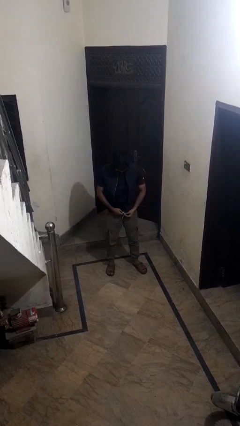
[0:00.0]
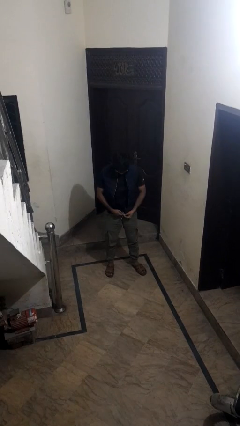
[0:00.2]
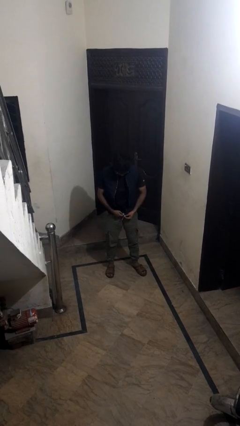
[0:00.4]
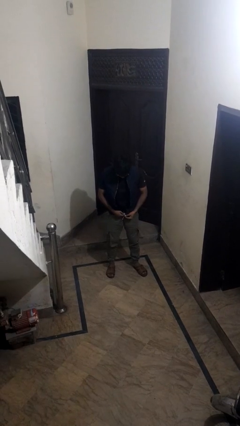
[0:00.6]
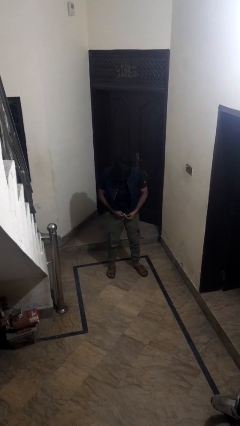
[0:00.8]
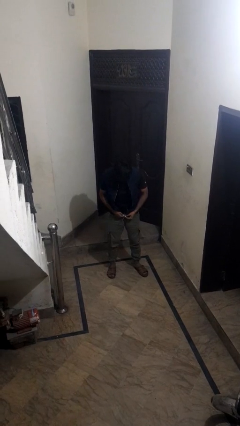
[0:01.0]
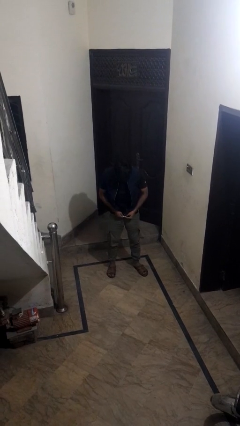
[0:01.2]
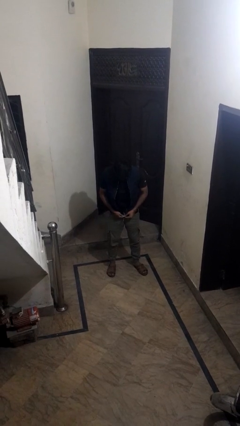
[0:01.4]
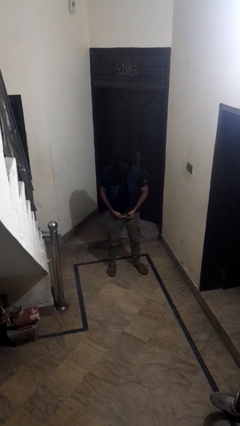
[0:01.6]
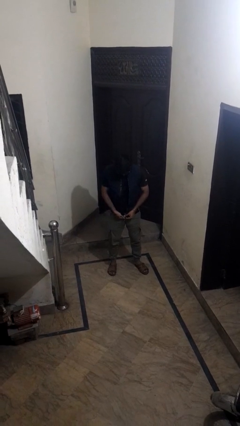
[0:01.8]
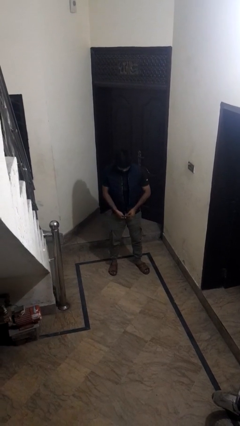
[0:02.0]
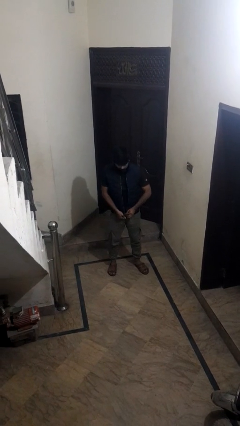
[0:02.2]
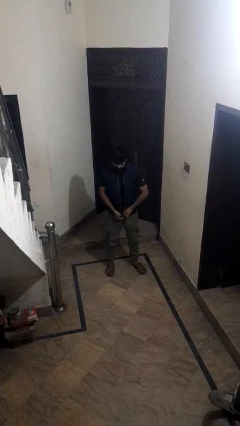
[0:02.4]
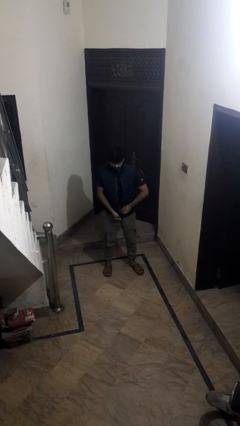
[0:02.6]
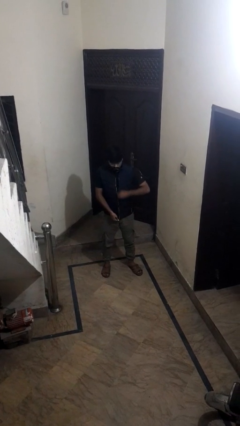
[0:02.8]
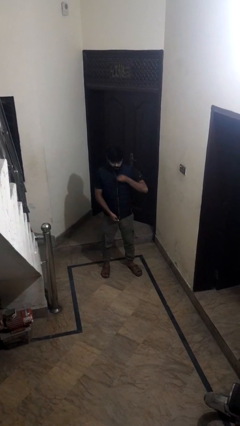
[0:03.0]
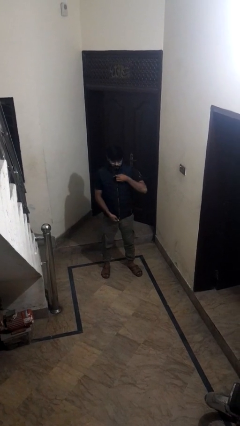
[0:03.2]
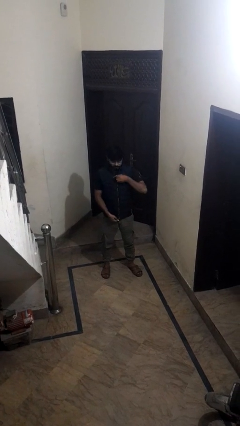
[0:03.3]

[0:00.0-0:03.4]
person zips up jacket

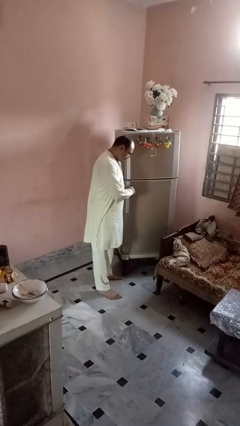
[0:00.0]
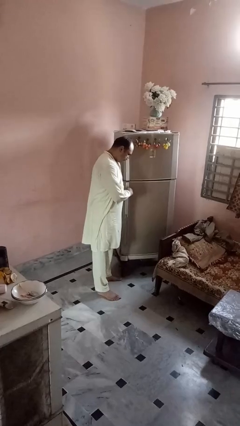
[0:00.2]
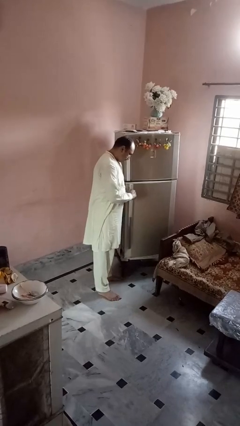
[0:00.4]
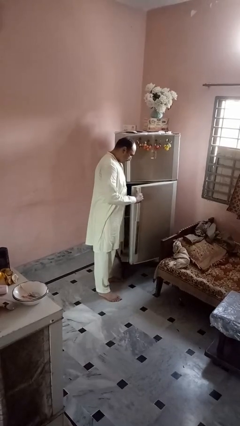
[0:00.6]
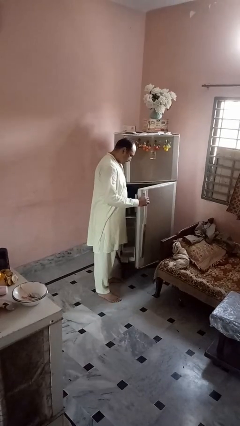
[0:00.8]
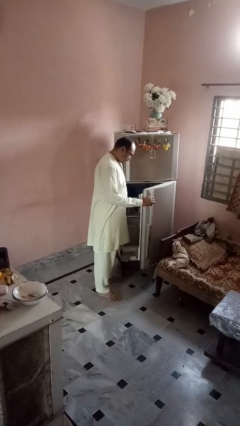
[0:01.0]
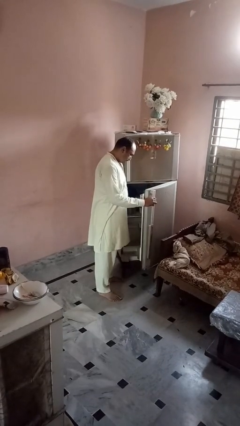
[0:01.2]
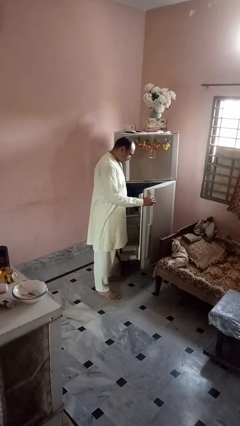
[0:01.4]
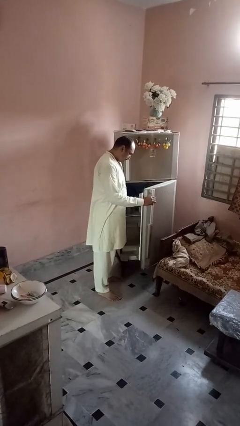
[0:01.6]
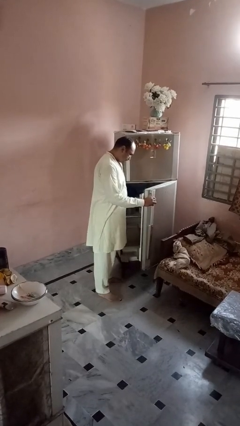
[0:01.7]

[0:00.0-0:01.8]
person opens refrigerator

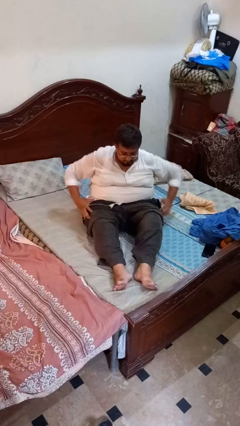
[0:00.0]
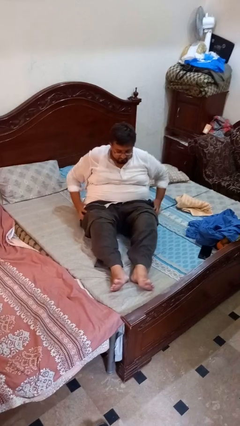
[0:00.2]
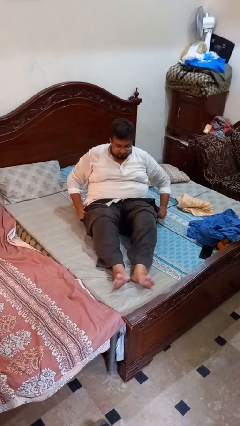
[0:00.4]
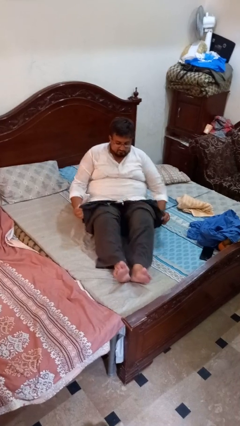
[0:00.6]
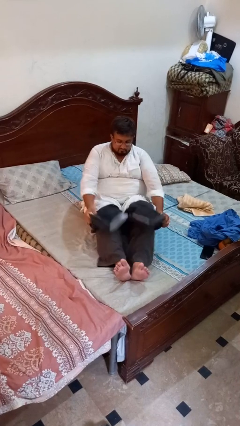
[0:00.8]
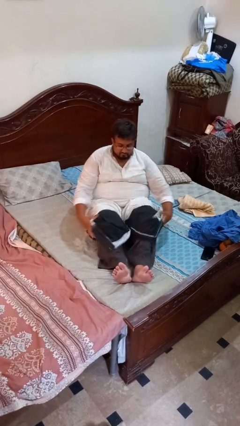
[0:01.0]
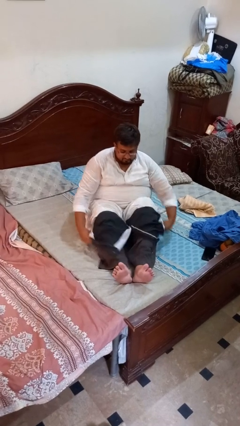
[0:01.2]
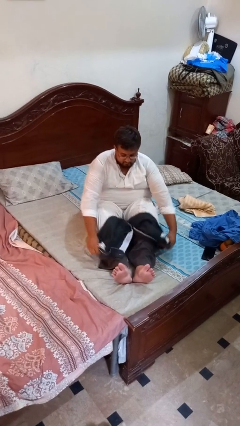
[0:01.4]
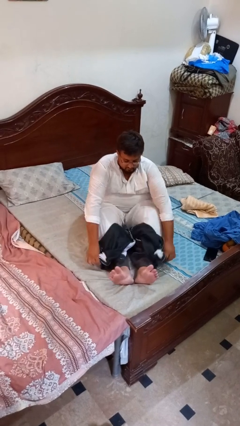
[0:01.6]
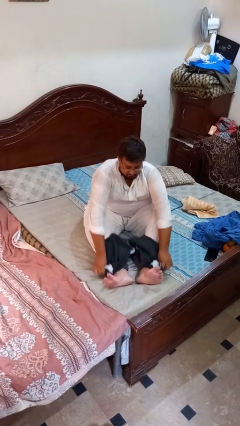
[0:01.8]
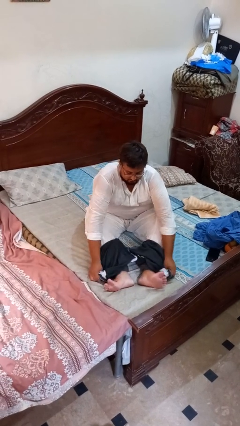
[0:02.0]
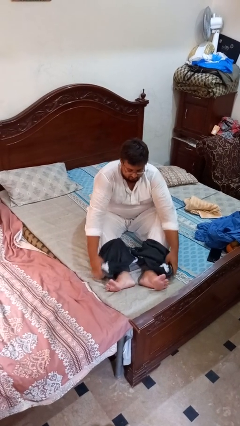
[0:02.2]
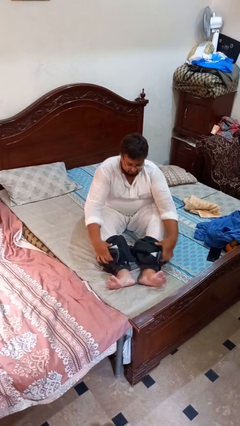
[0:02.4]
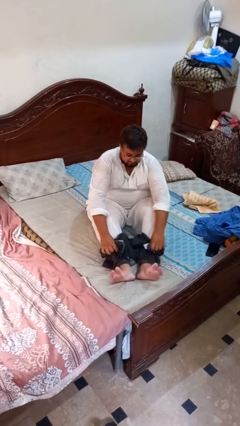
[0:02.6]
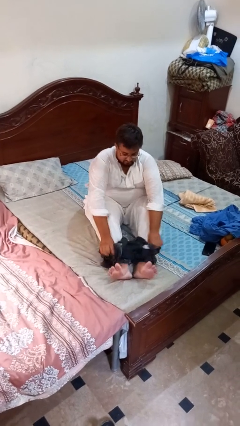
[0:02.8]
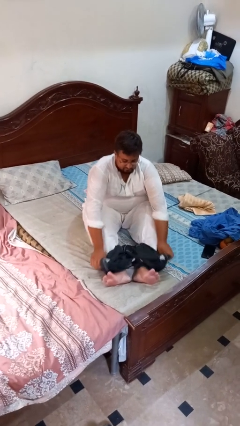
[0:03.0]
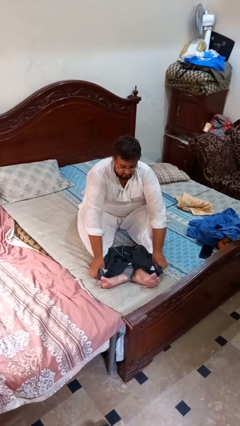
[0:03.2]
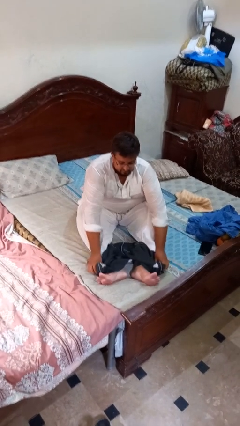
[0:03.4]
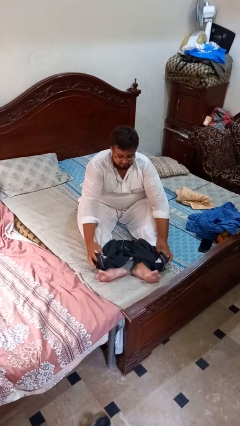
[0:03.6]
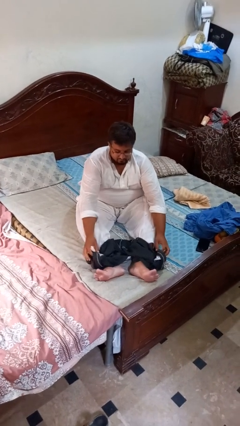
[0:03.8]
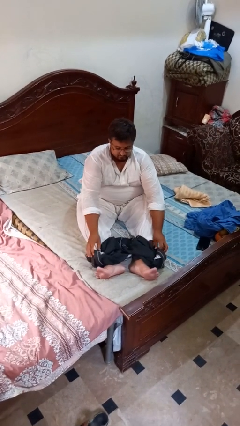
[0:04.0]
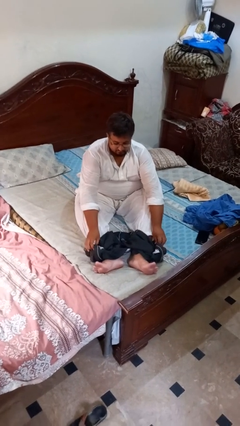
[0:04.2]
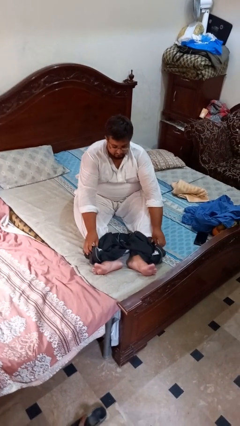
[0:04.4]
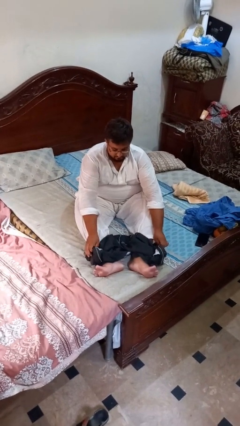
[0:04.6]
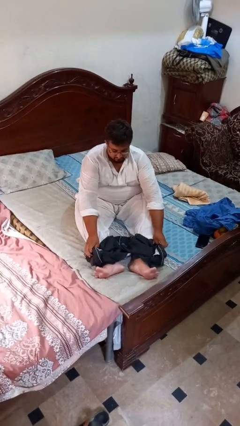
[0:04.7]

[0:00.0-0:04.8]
person takes off pants

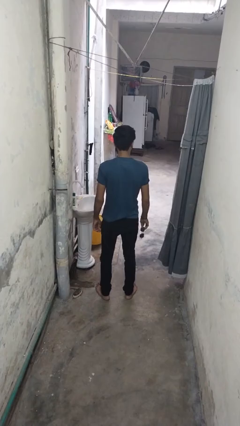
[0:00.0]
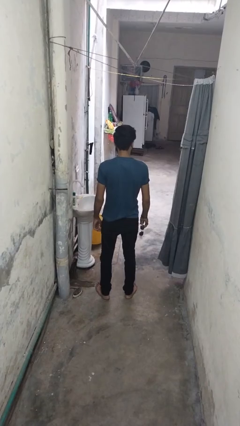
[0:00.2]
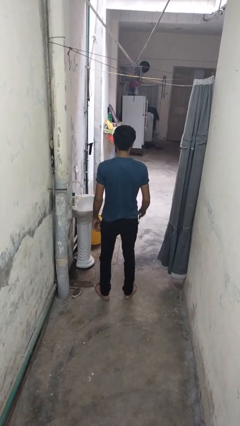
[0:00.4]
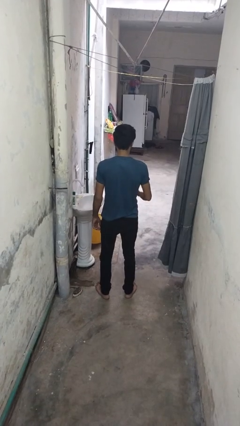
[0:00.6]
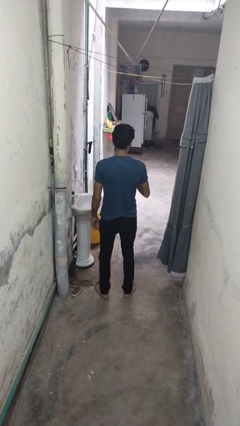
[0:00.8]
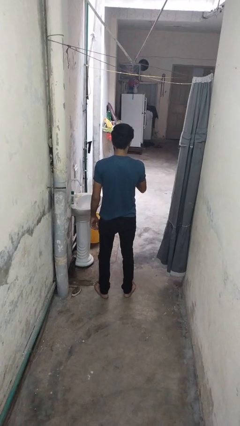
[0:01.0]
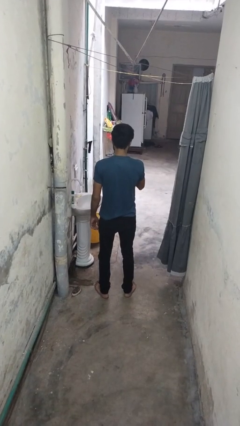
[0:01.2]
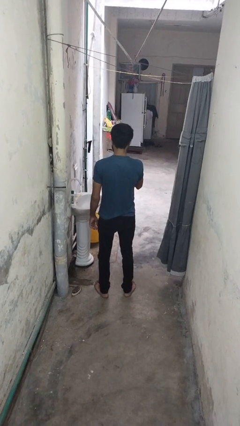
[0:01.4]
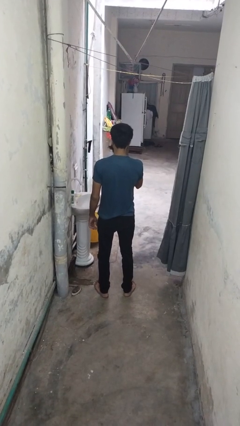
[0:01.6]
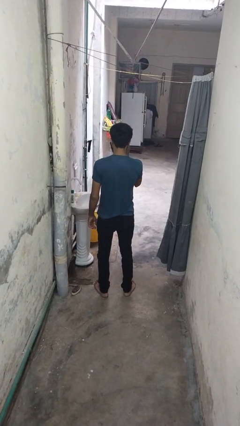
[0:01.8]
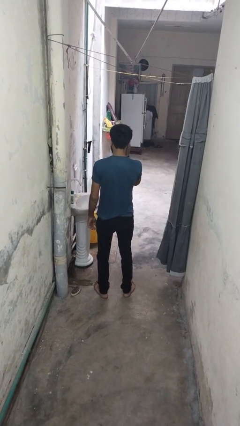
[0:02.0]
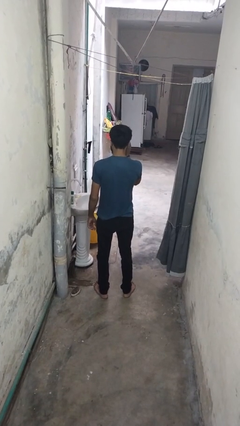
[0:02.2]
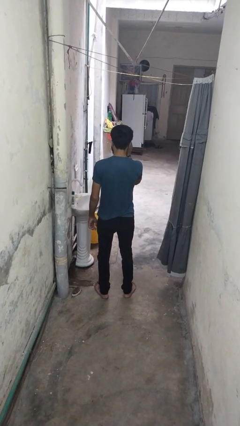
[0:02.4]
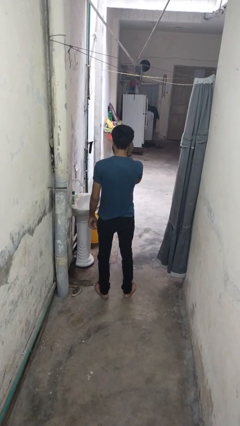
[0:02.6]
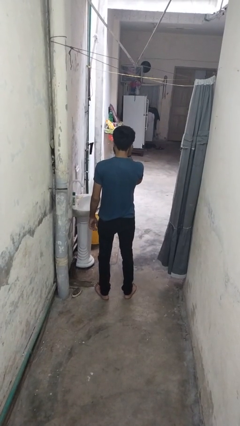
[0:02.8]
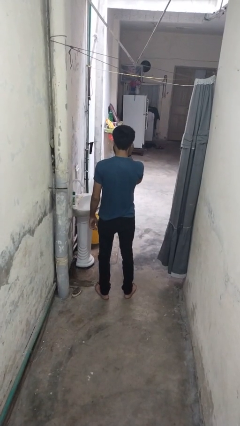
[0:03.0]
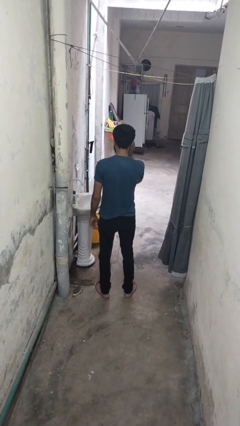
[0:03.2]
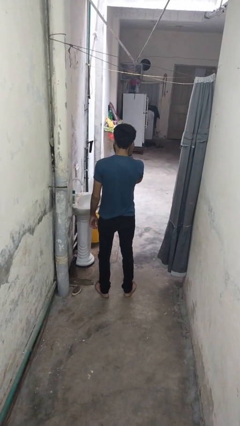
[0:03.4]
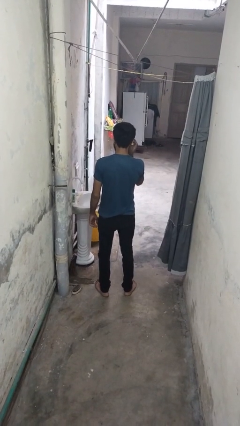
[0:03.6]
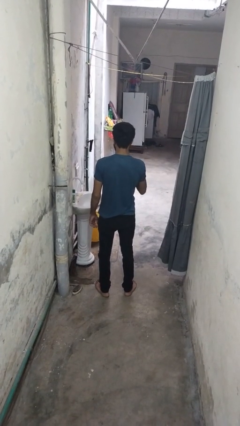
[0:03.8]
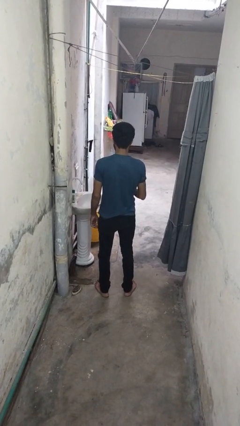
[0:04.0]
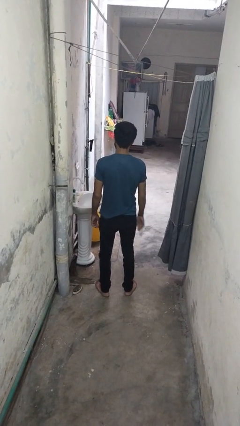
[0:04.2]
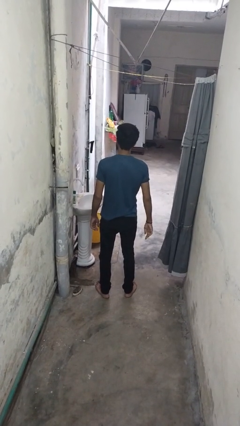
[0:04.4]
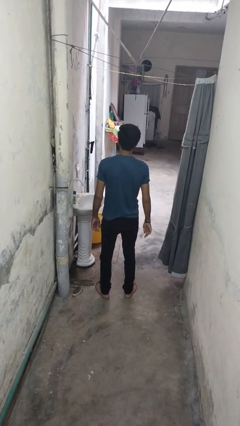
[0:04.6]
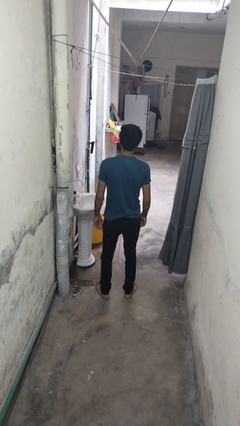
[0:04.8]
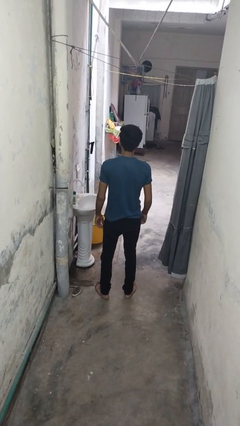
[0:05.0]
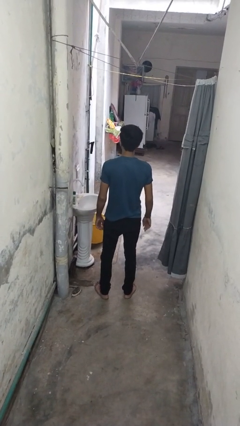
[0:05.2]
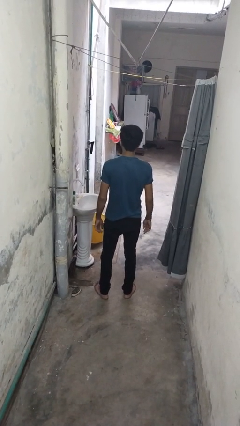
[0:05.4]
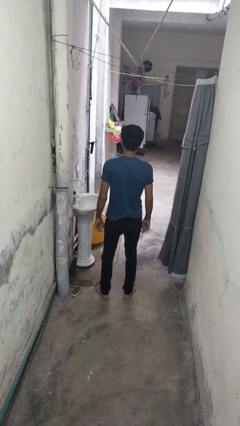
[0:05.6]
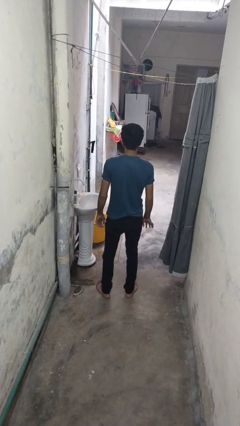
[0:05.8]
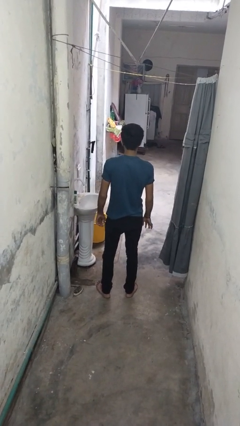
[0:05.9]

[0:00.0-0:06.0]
person puts on sunglasses

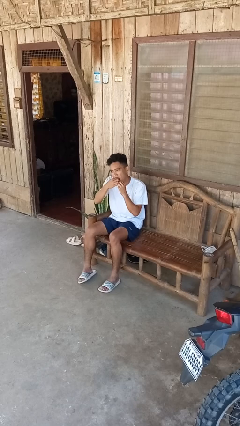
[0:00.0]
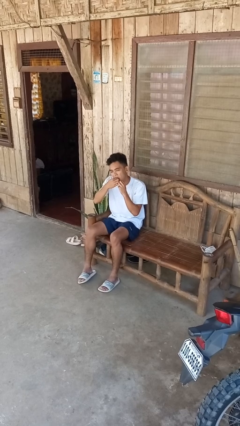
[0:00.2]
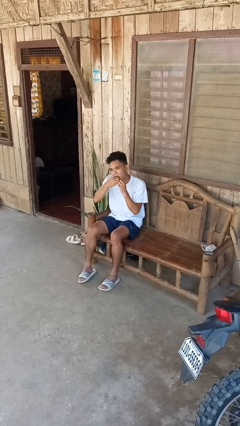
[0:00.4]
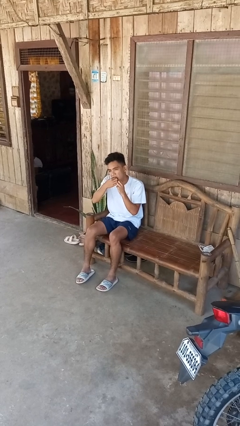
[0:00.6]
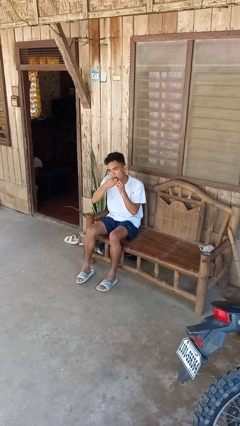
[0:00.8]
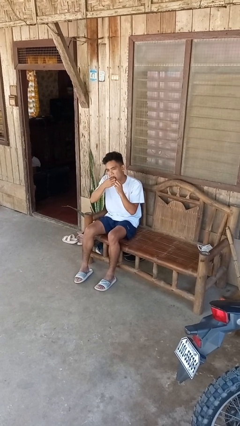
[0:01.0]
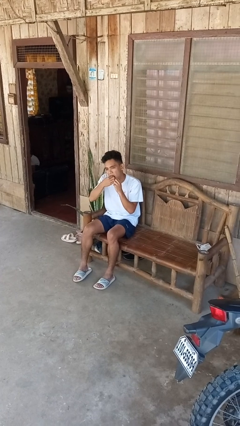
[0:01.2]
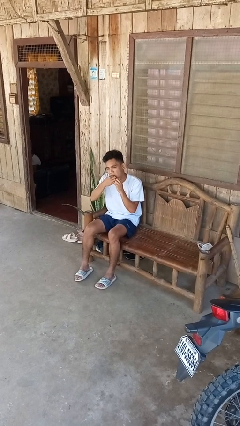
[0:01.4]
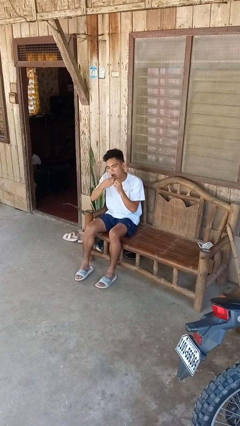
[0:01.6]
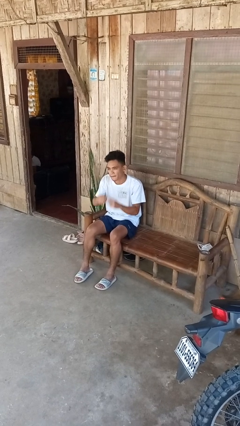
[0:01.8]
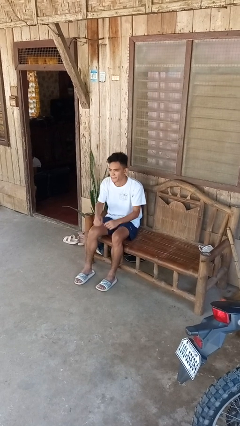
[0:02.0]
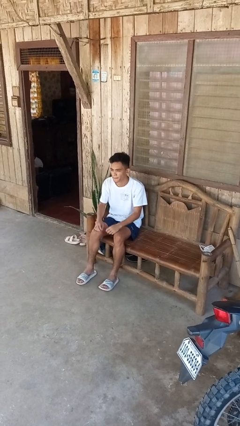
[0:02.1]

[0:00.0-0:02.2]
person flosses
